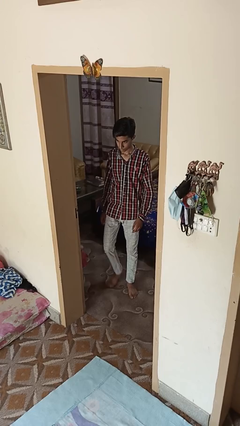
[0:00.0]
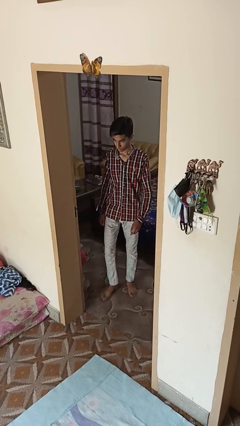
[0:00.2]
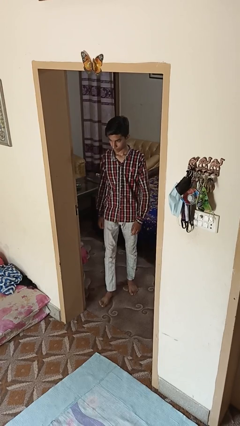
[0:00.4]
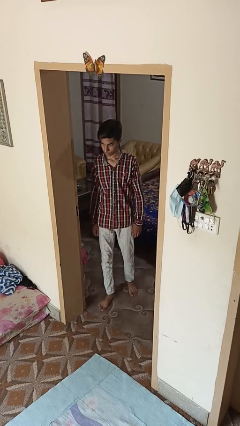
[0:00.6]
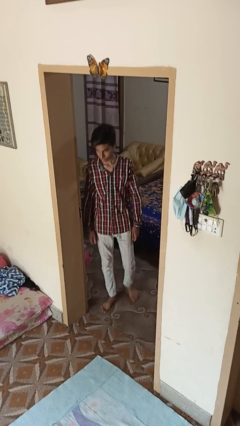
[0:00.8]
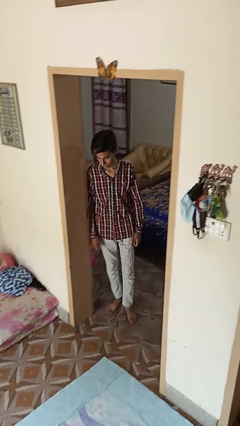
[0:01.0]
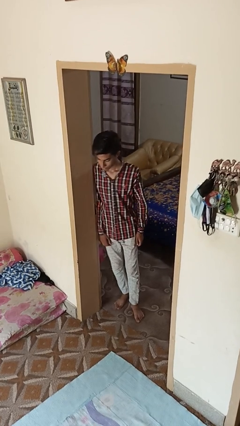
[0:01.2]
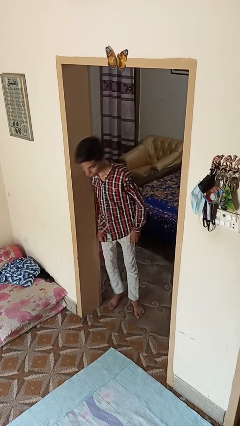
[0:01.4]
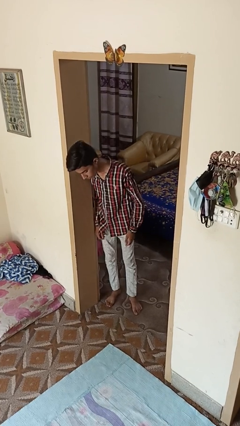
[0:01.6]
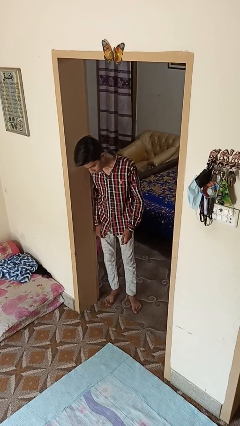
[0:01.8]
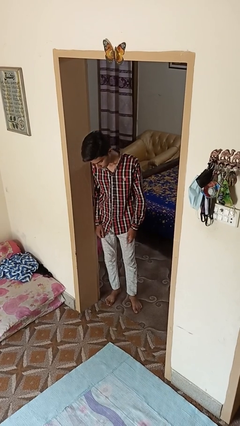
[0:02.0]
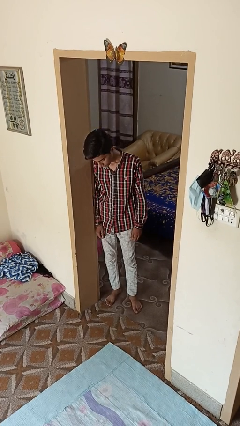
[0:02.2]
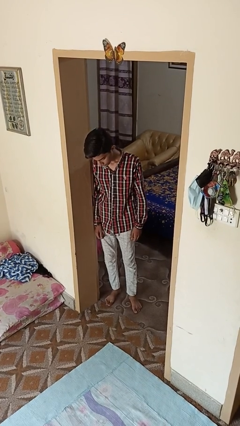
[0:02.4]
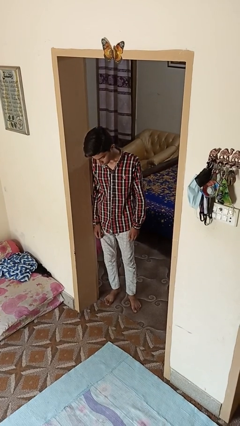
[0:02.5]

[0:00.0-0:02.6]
person bumps into wall

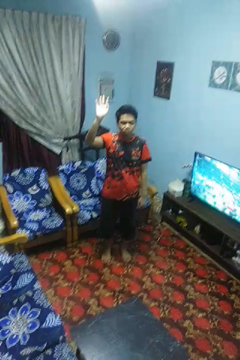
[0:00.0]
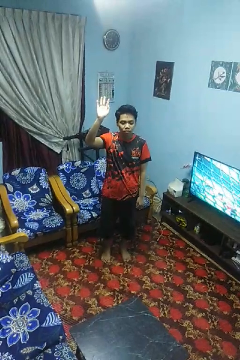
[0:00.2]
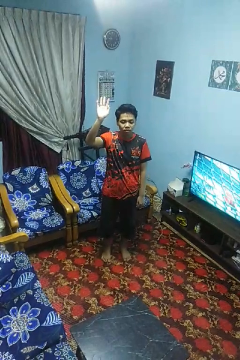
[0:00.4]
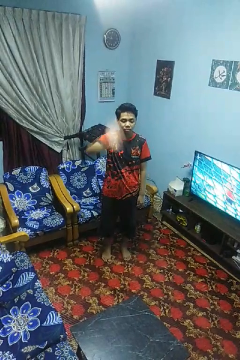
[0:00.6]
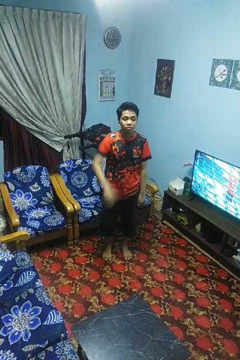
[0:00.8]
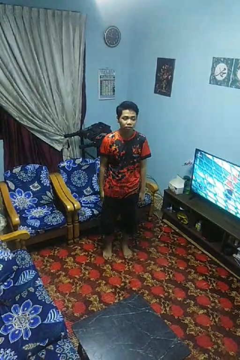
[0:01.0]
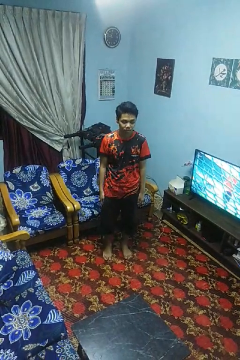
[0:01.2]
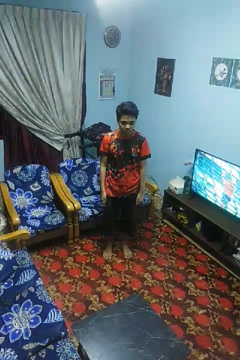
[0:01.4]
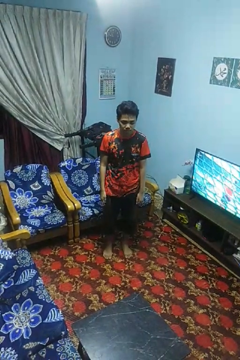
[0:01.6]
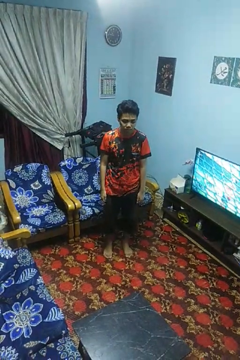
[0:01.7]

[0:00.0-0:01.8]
person gestures swipe down

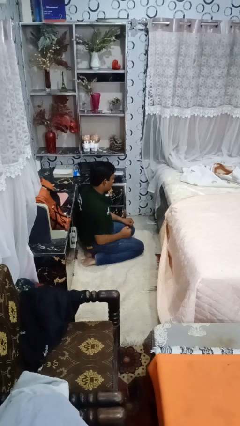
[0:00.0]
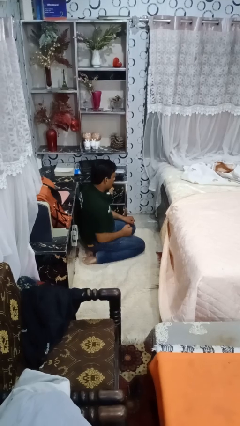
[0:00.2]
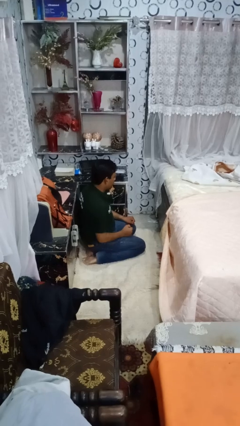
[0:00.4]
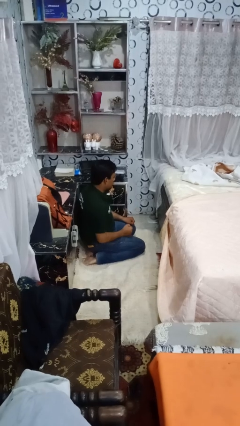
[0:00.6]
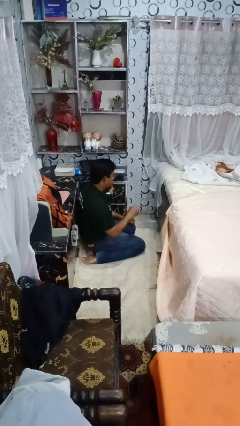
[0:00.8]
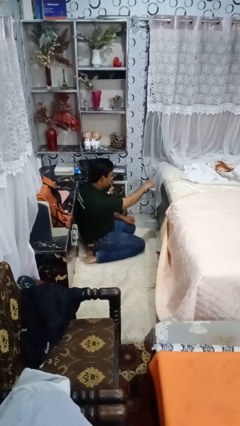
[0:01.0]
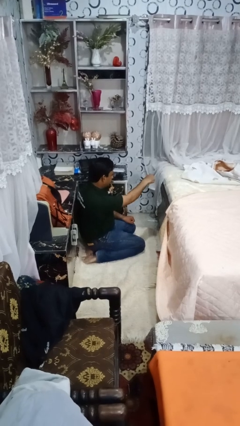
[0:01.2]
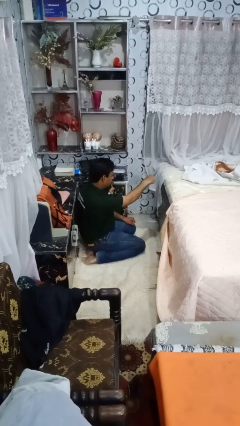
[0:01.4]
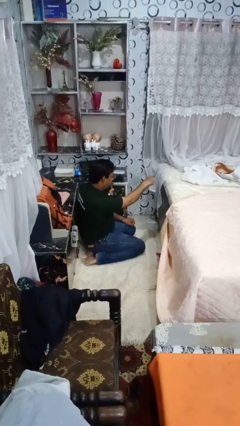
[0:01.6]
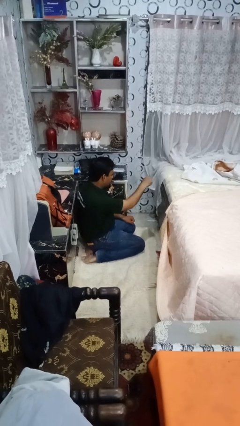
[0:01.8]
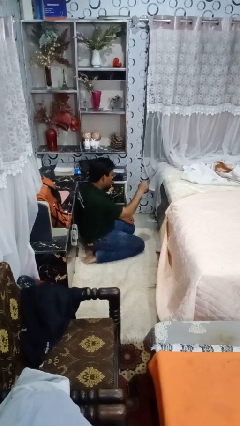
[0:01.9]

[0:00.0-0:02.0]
person punches

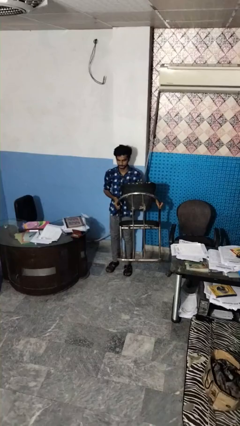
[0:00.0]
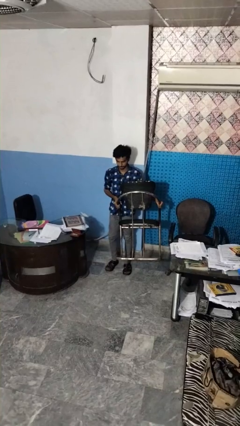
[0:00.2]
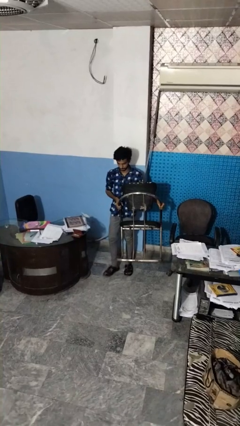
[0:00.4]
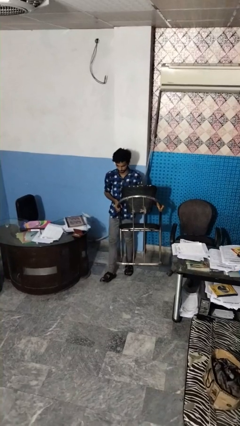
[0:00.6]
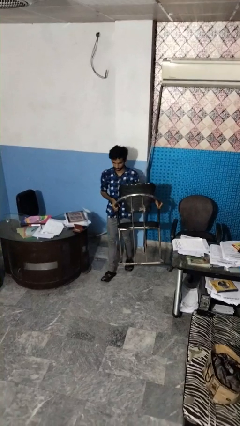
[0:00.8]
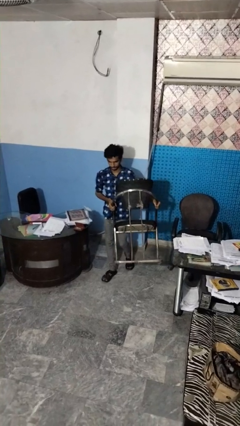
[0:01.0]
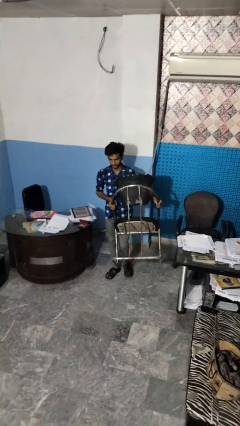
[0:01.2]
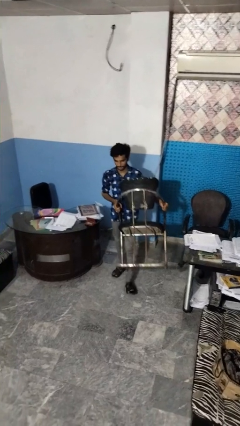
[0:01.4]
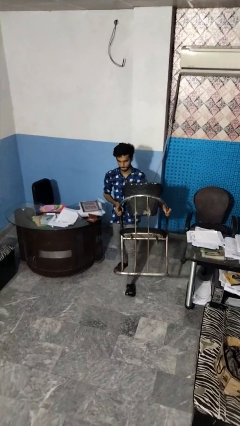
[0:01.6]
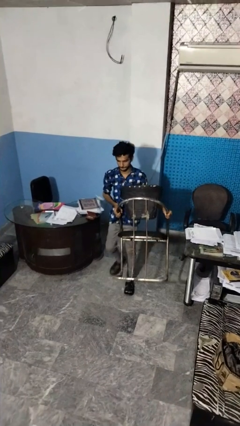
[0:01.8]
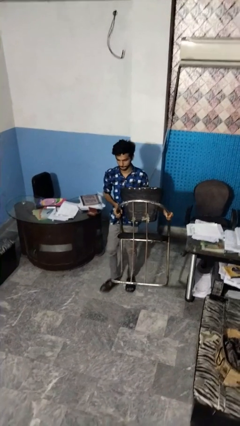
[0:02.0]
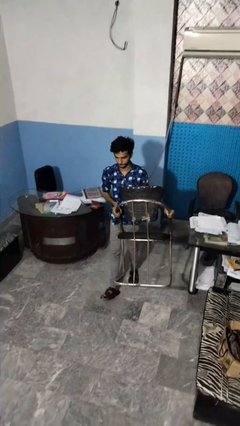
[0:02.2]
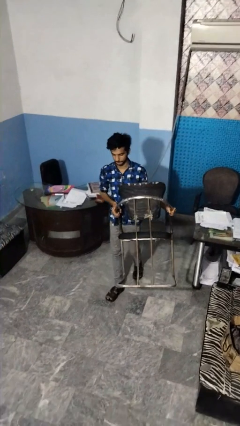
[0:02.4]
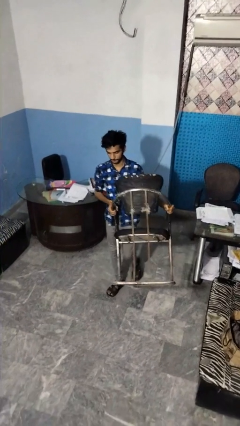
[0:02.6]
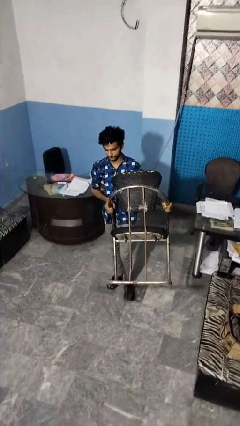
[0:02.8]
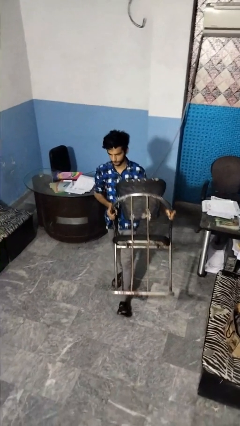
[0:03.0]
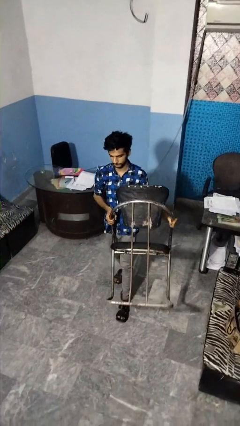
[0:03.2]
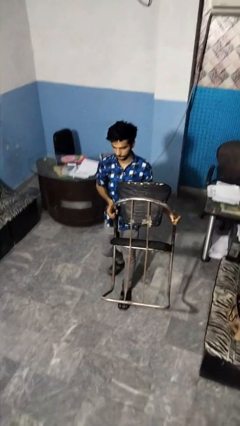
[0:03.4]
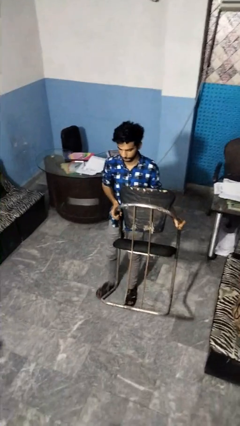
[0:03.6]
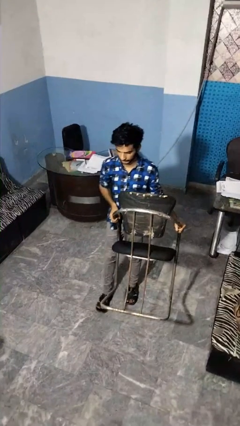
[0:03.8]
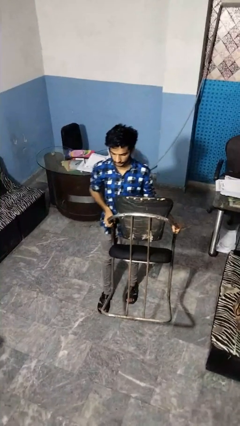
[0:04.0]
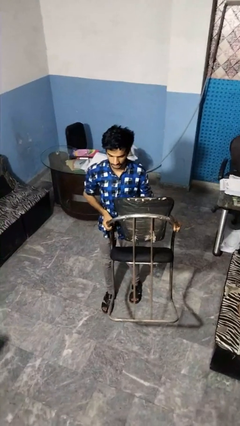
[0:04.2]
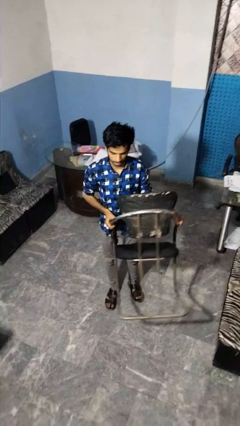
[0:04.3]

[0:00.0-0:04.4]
person carries furniture

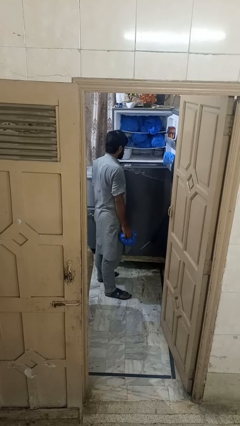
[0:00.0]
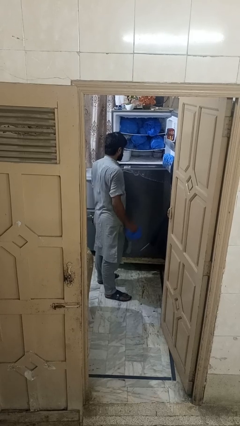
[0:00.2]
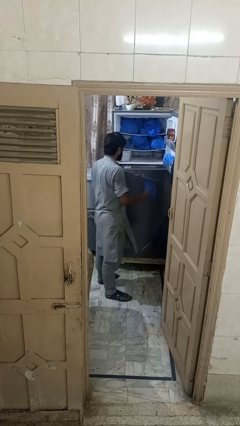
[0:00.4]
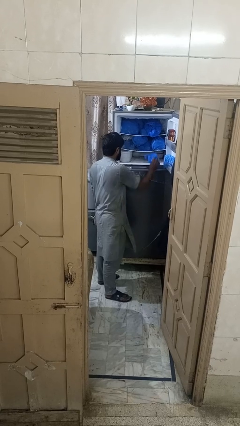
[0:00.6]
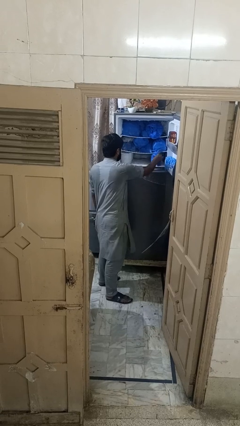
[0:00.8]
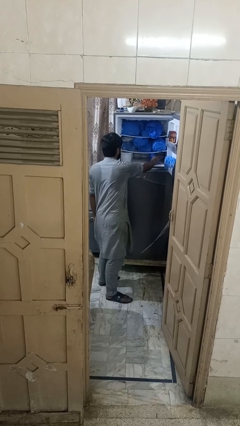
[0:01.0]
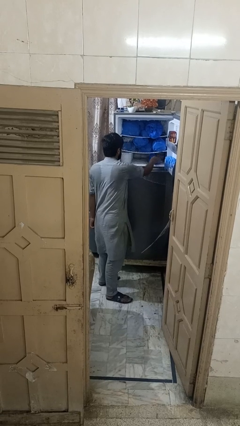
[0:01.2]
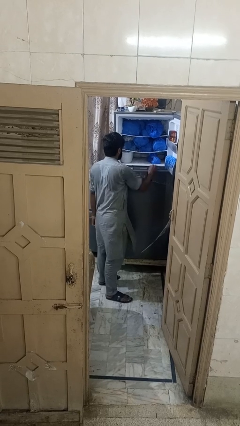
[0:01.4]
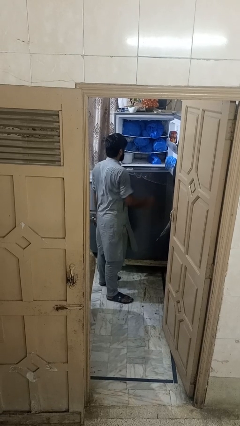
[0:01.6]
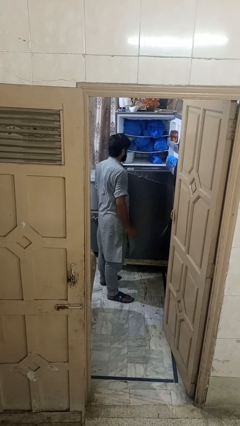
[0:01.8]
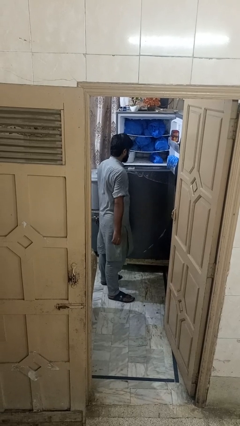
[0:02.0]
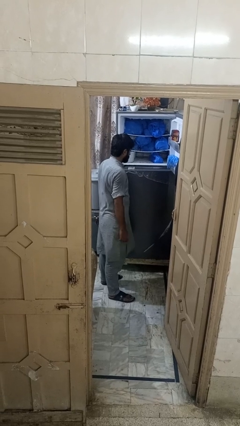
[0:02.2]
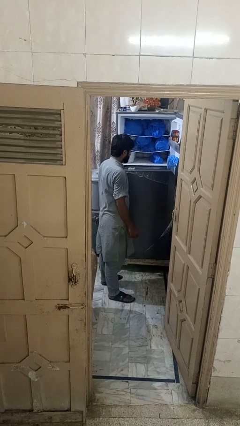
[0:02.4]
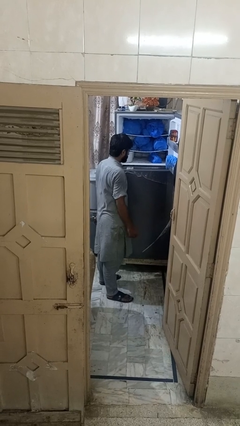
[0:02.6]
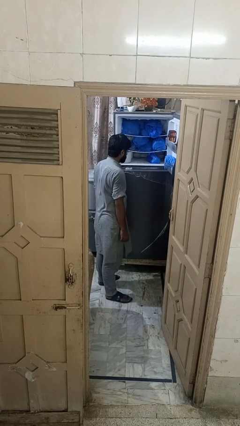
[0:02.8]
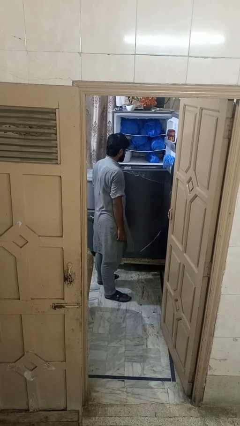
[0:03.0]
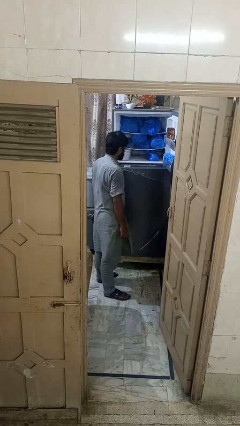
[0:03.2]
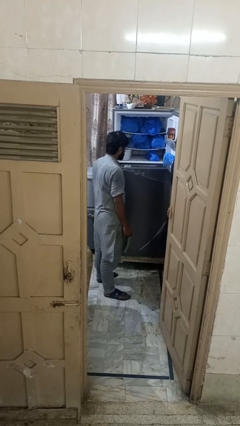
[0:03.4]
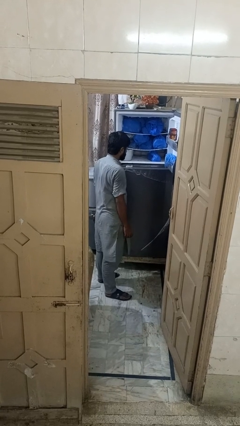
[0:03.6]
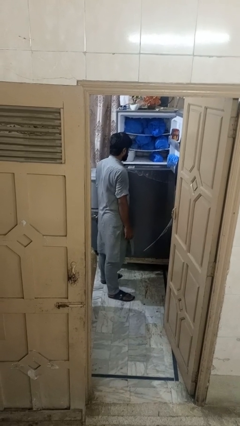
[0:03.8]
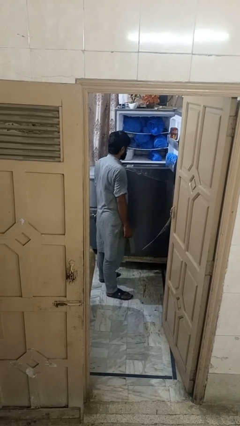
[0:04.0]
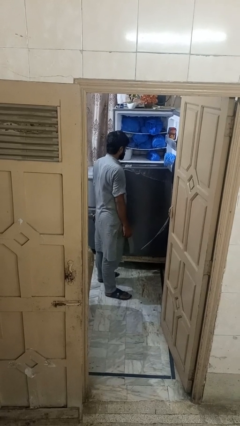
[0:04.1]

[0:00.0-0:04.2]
person loads groceries into refrigerator

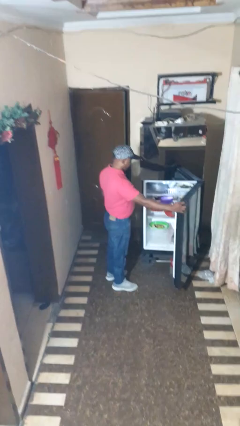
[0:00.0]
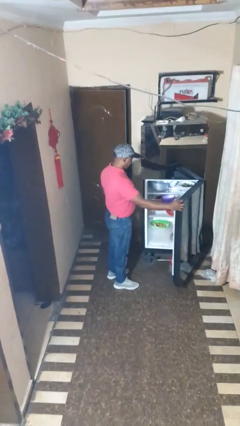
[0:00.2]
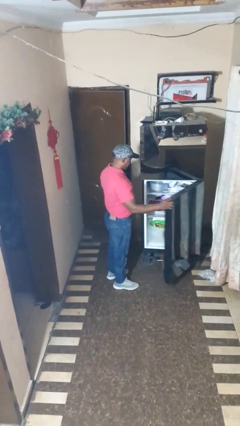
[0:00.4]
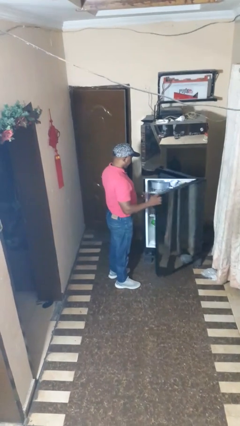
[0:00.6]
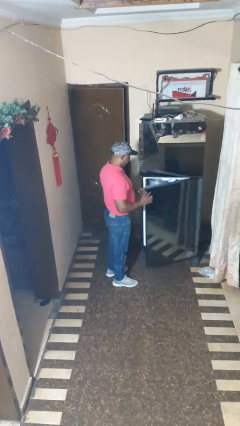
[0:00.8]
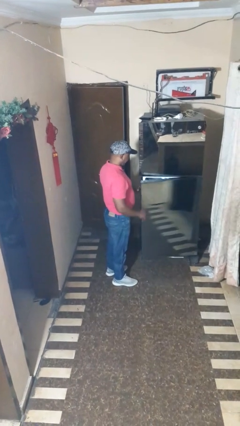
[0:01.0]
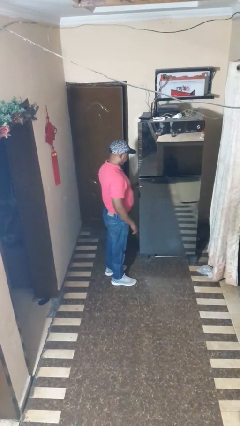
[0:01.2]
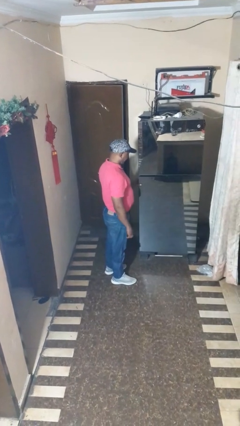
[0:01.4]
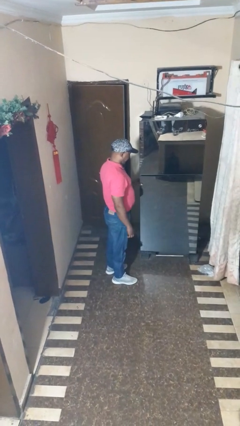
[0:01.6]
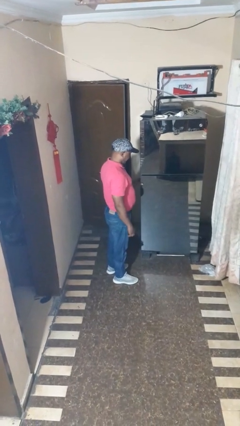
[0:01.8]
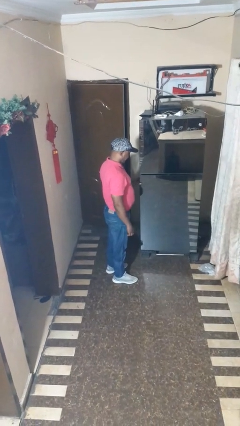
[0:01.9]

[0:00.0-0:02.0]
person closes refrigerator

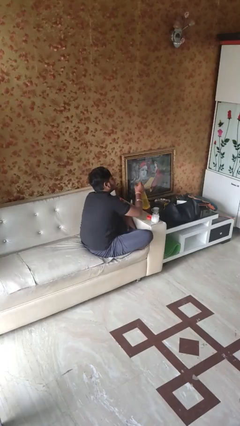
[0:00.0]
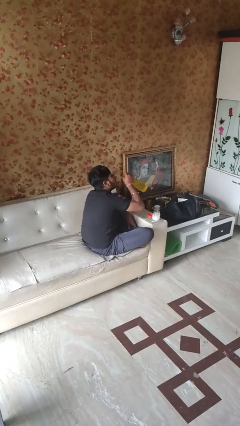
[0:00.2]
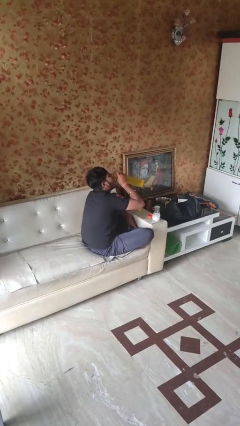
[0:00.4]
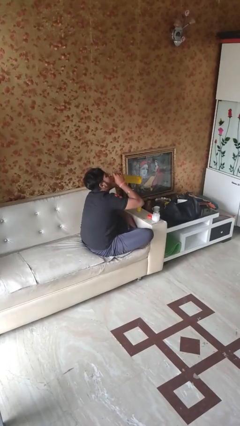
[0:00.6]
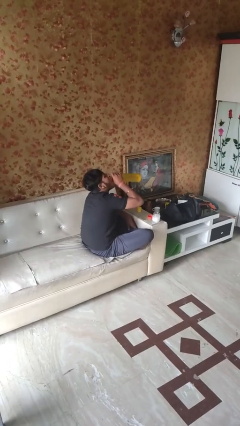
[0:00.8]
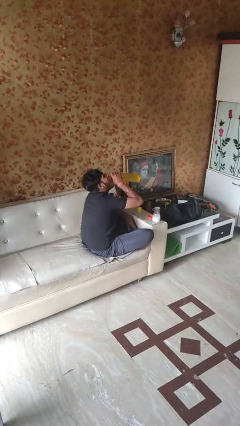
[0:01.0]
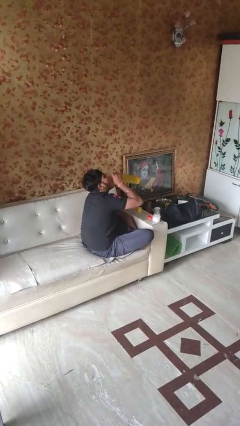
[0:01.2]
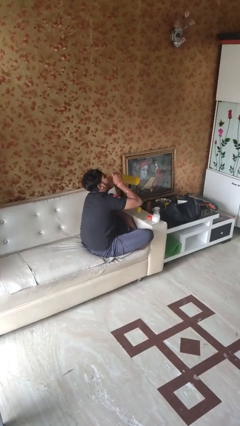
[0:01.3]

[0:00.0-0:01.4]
person drinks from cup
